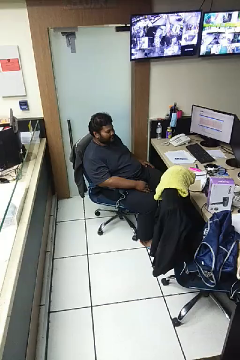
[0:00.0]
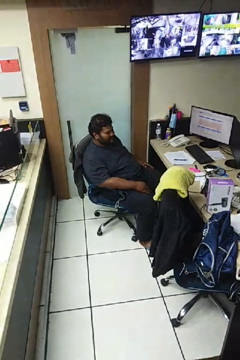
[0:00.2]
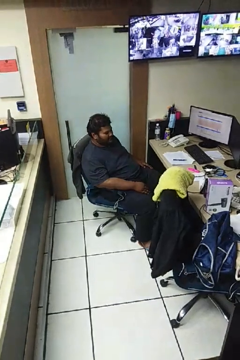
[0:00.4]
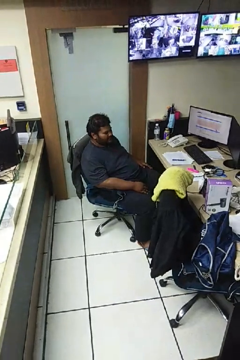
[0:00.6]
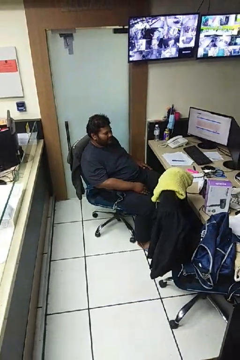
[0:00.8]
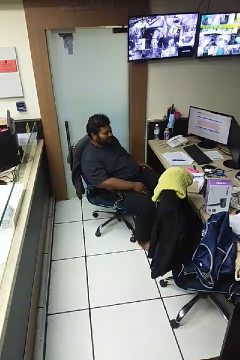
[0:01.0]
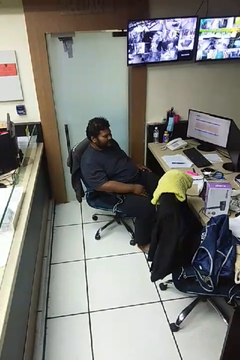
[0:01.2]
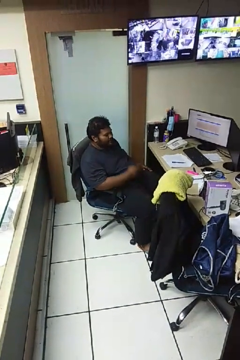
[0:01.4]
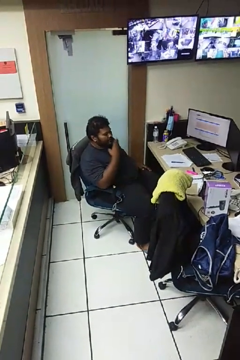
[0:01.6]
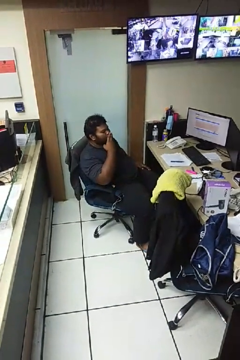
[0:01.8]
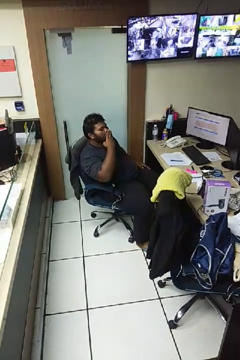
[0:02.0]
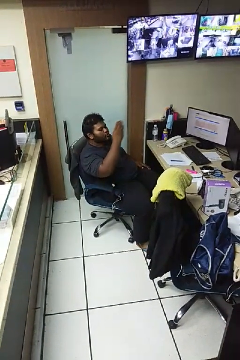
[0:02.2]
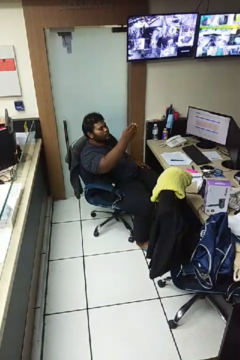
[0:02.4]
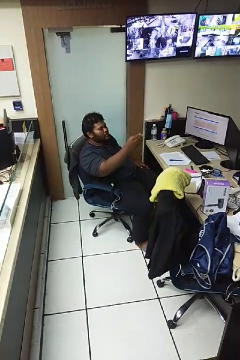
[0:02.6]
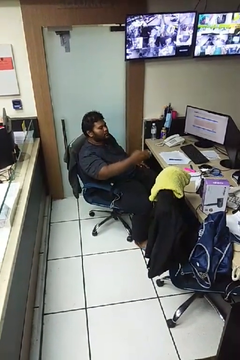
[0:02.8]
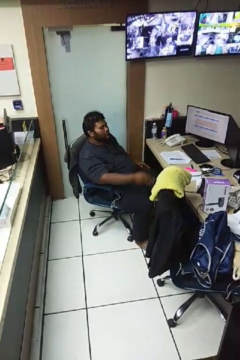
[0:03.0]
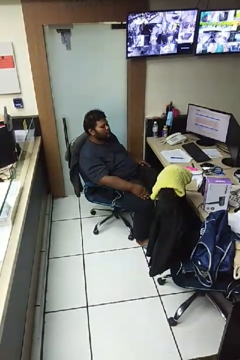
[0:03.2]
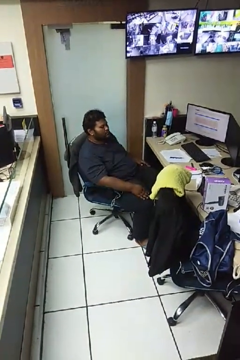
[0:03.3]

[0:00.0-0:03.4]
person gestures blow kiss

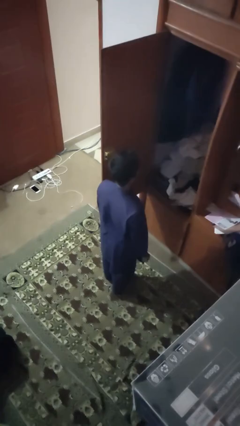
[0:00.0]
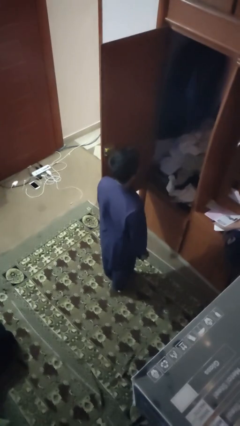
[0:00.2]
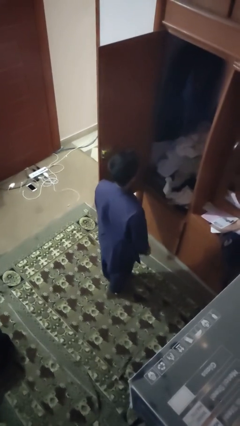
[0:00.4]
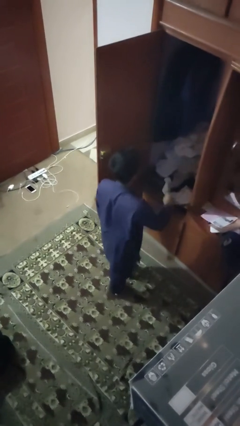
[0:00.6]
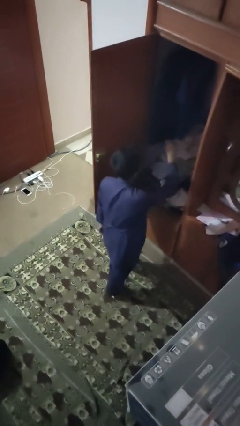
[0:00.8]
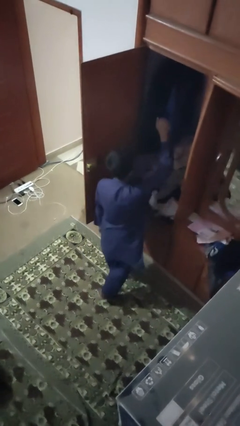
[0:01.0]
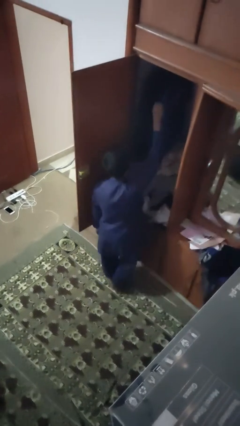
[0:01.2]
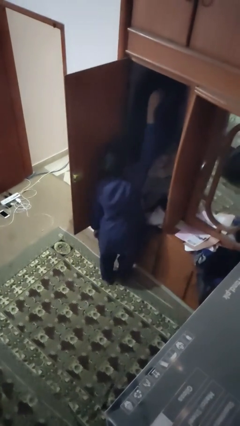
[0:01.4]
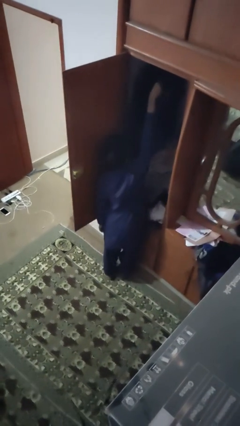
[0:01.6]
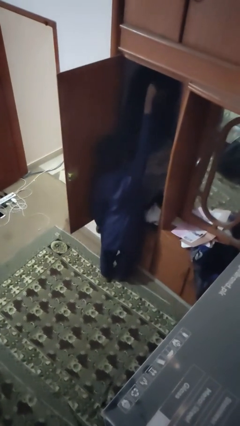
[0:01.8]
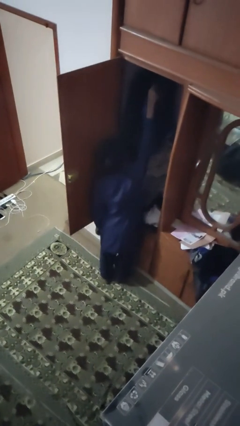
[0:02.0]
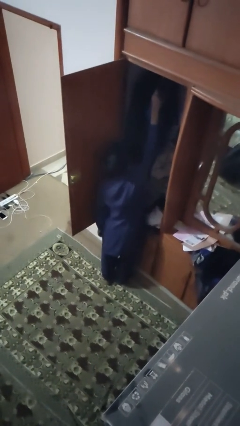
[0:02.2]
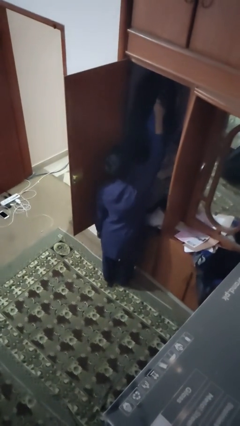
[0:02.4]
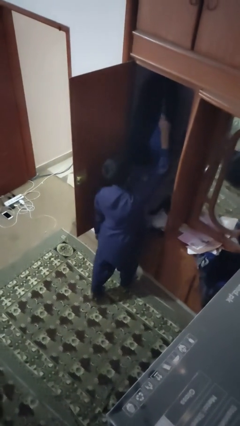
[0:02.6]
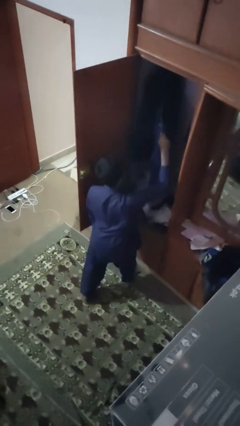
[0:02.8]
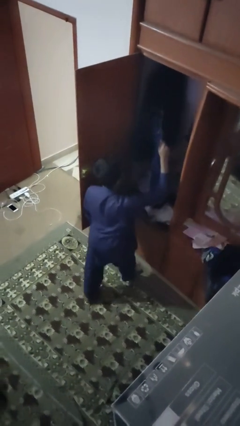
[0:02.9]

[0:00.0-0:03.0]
person takes clothes from closet

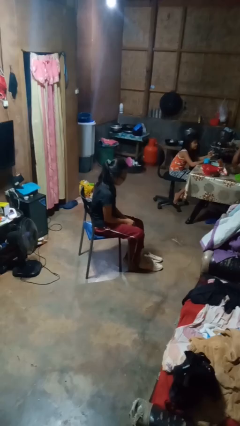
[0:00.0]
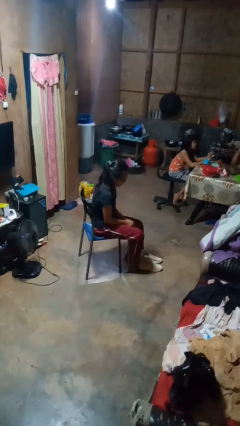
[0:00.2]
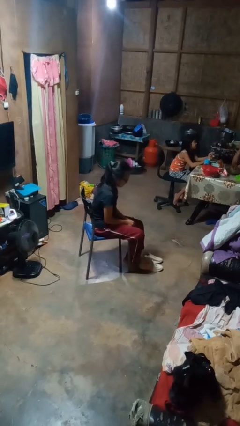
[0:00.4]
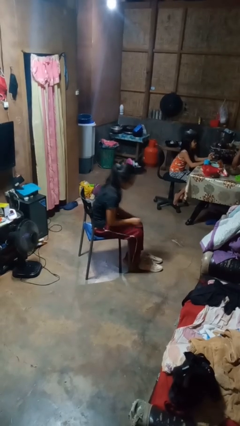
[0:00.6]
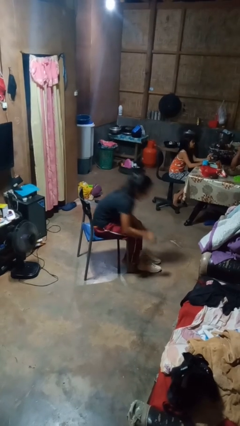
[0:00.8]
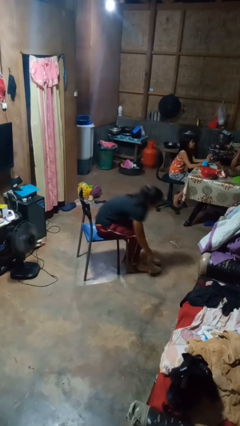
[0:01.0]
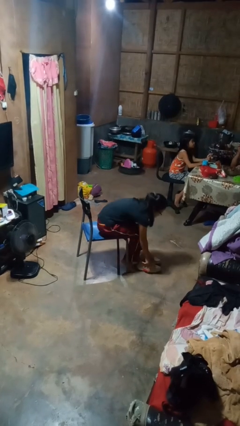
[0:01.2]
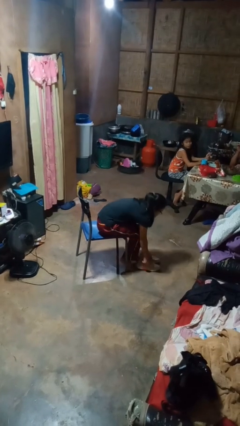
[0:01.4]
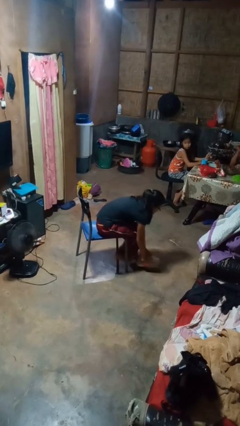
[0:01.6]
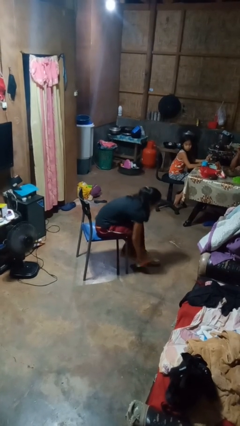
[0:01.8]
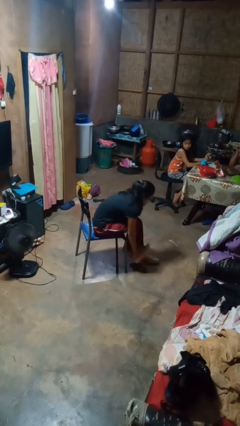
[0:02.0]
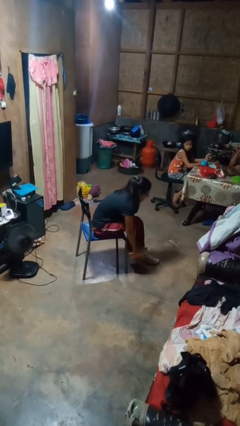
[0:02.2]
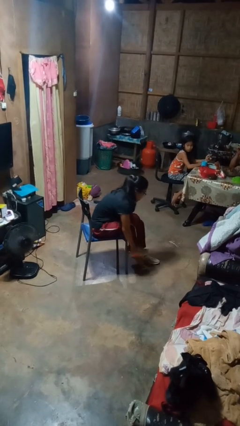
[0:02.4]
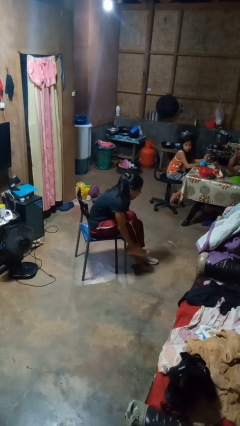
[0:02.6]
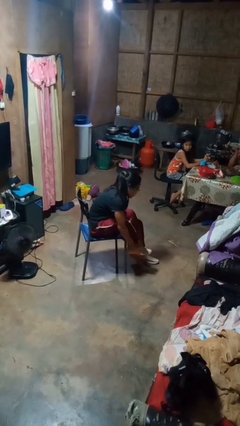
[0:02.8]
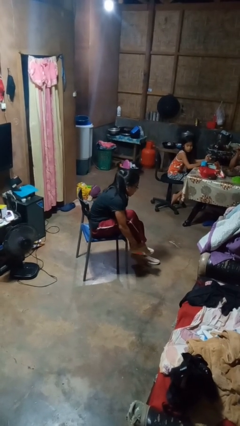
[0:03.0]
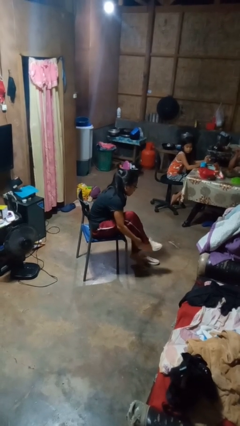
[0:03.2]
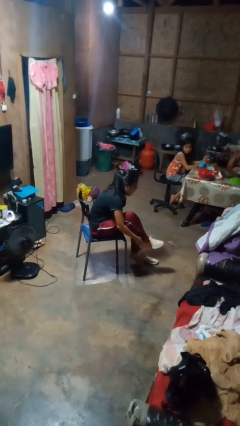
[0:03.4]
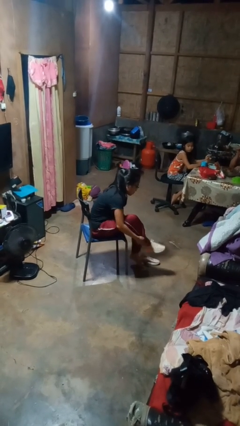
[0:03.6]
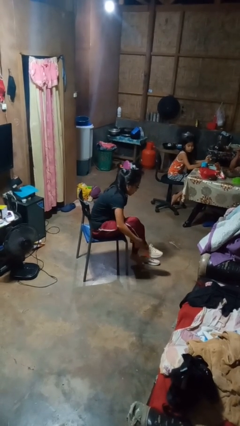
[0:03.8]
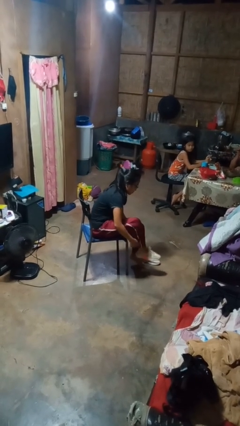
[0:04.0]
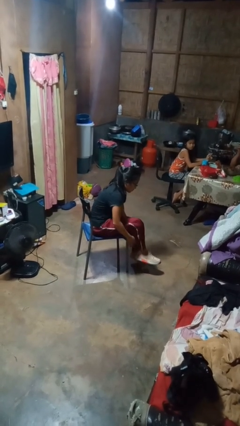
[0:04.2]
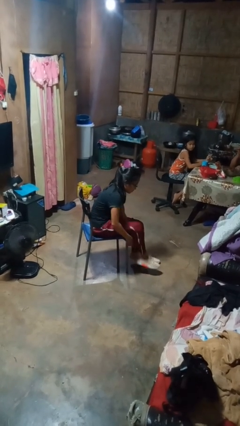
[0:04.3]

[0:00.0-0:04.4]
person puts on shoes

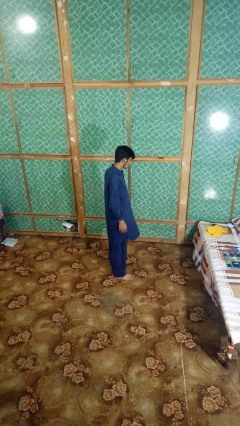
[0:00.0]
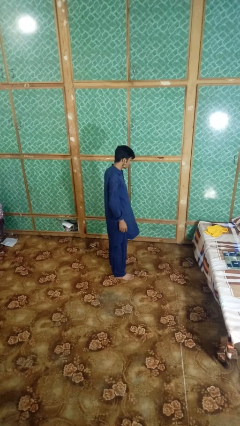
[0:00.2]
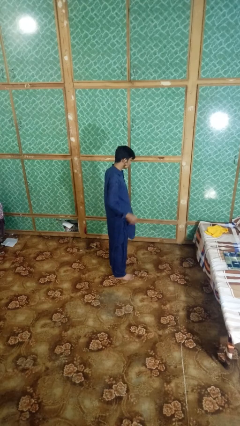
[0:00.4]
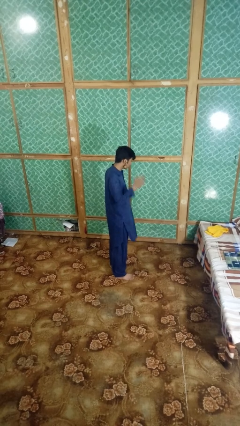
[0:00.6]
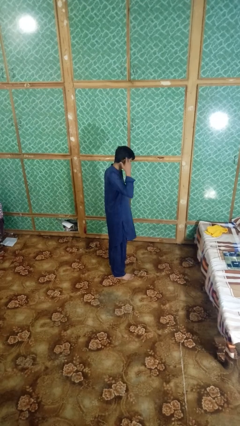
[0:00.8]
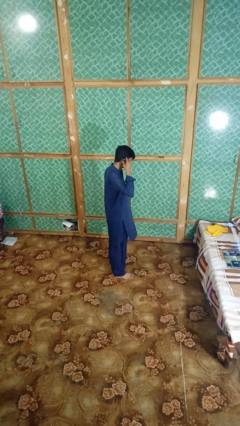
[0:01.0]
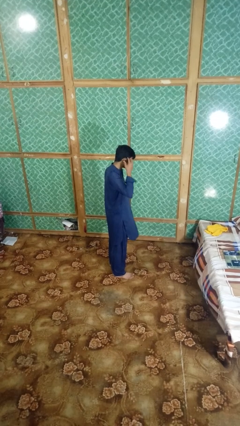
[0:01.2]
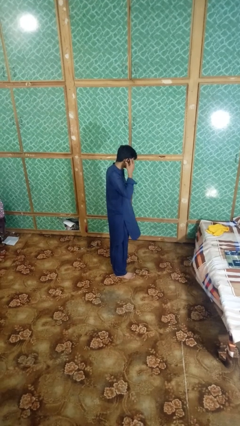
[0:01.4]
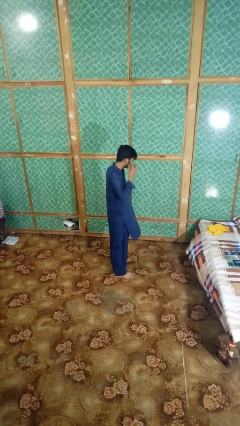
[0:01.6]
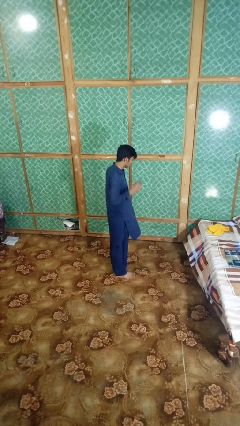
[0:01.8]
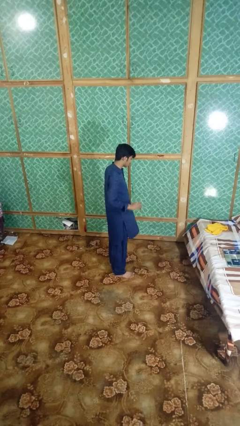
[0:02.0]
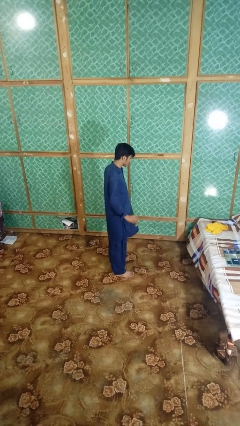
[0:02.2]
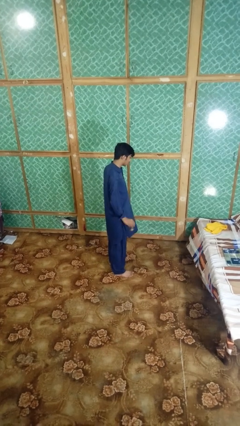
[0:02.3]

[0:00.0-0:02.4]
person takes off earrings

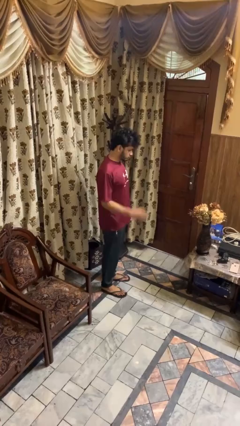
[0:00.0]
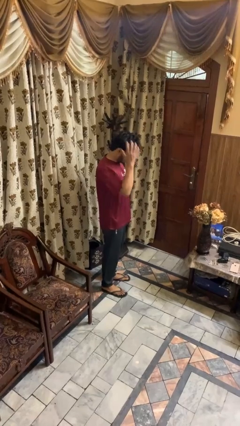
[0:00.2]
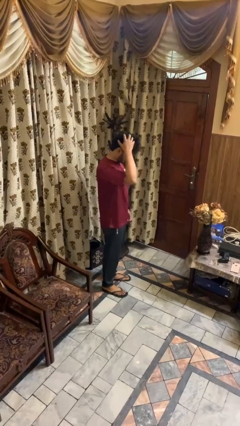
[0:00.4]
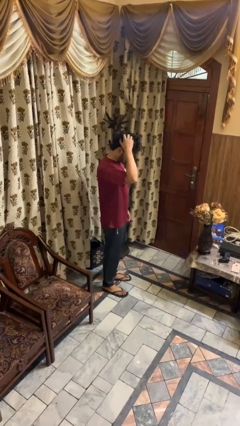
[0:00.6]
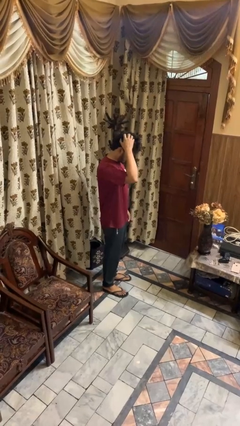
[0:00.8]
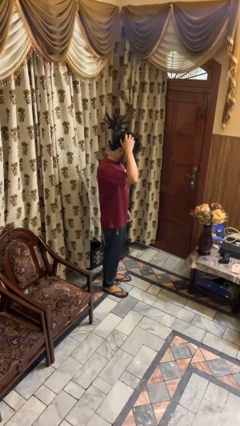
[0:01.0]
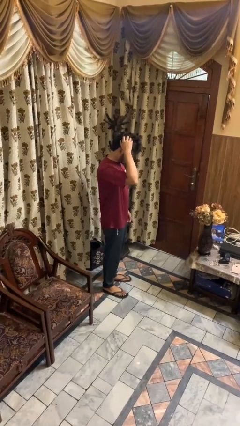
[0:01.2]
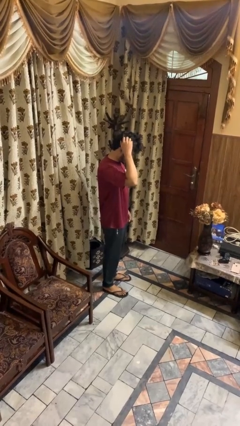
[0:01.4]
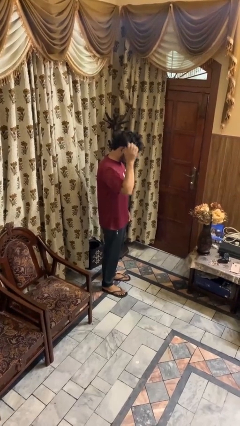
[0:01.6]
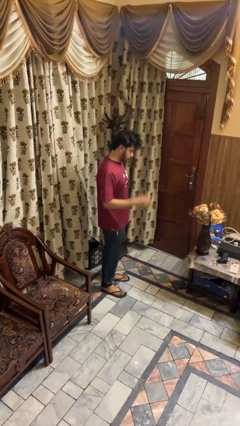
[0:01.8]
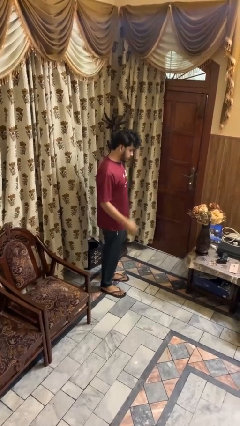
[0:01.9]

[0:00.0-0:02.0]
person scratches face

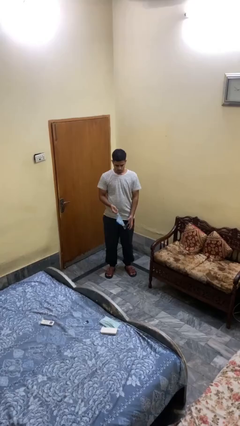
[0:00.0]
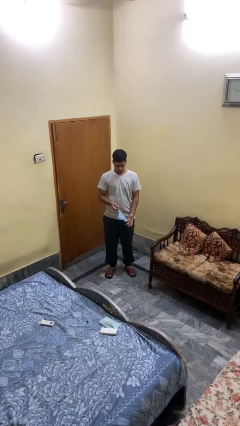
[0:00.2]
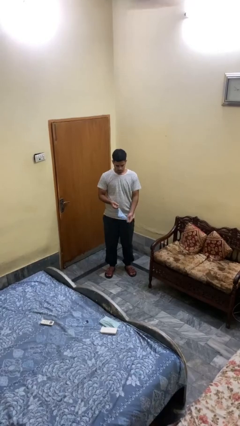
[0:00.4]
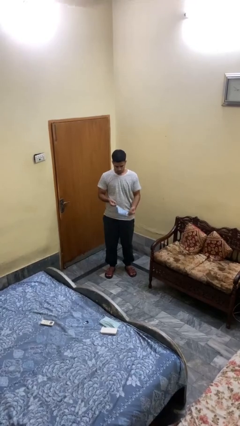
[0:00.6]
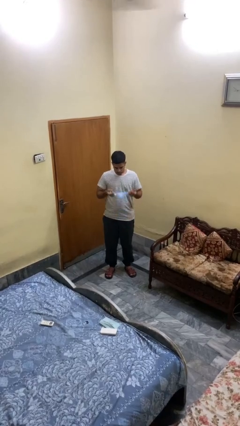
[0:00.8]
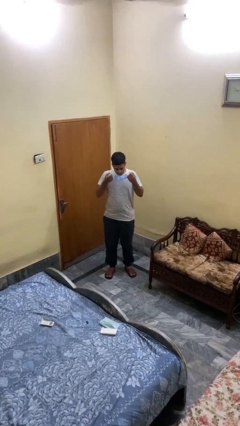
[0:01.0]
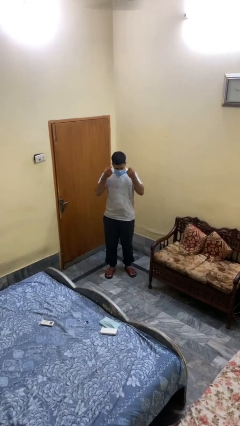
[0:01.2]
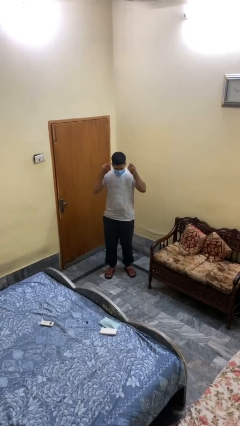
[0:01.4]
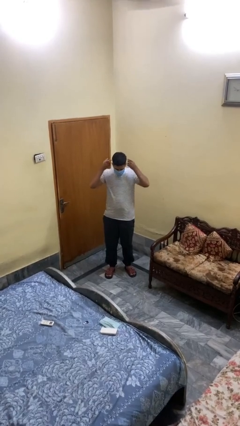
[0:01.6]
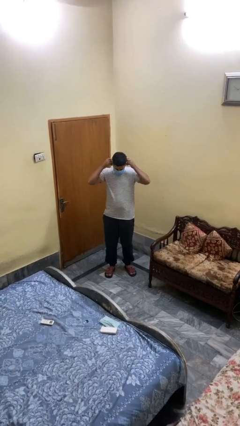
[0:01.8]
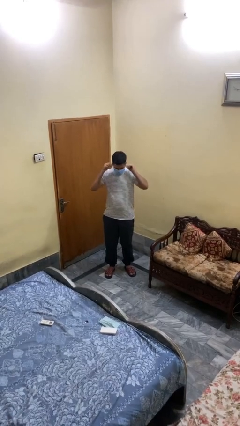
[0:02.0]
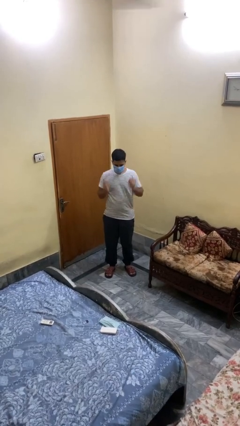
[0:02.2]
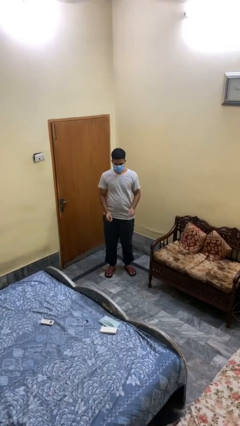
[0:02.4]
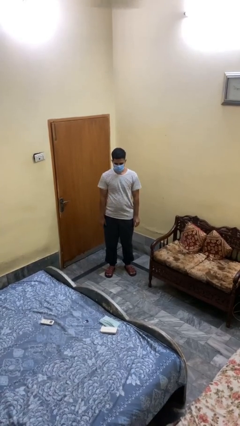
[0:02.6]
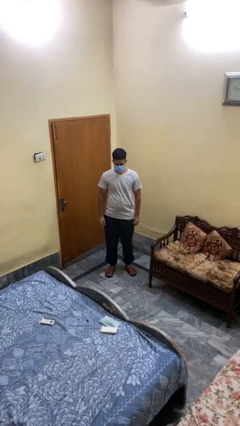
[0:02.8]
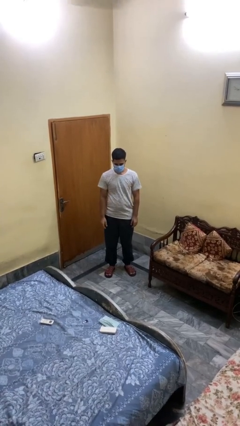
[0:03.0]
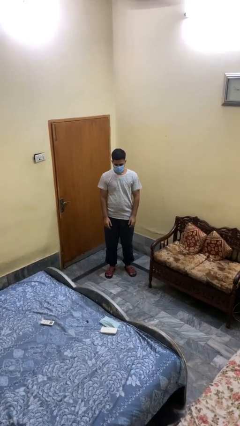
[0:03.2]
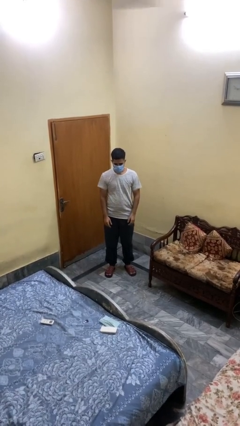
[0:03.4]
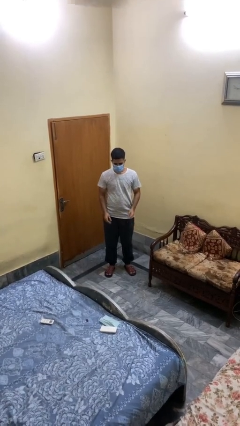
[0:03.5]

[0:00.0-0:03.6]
person puts on facemask
